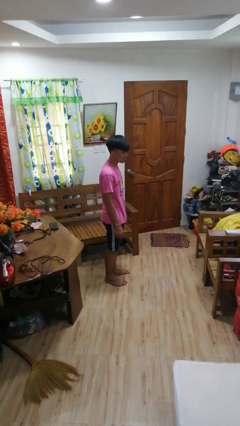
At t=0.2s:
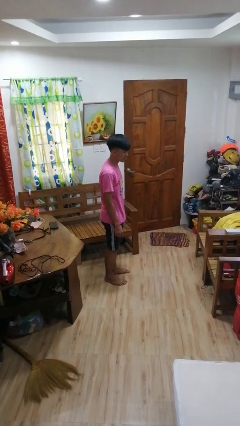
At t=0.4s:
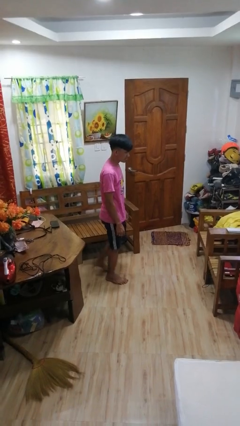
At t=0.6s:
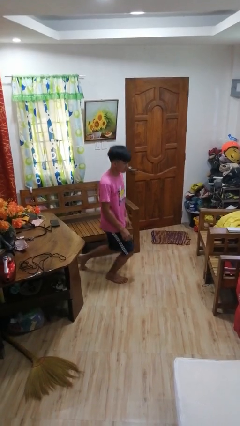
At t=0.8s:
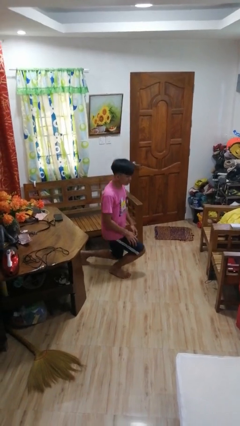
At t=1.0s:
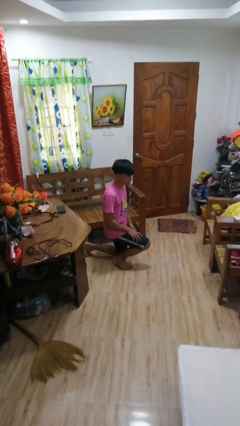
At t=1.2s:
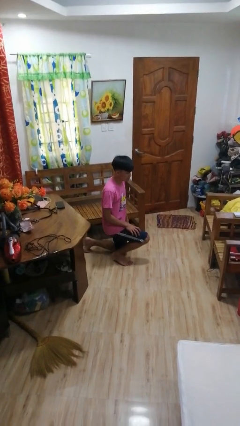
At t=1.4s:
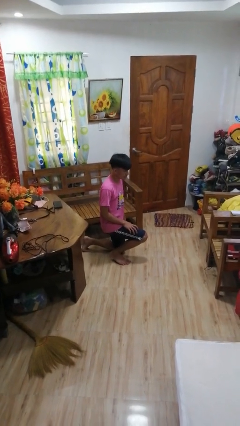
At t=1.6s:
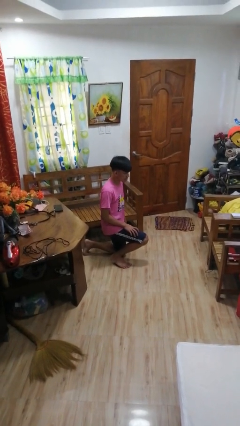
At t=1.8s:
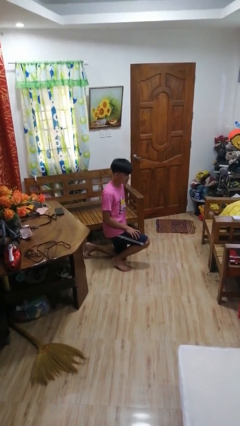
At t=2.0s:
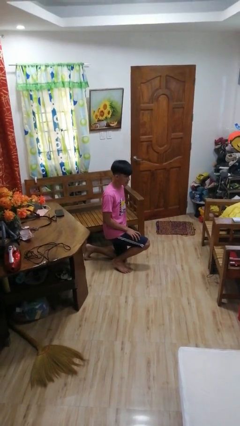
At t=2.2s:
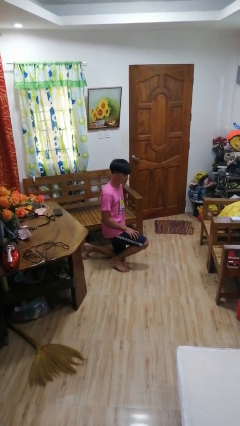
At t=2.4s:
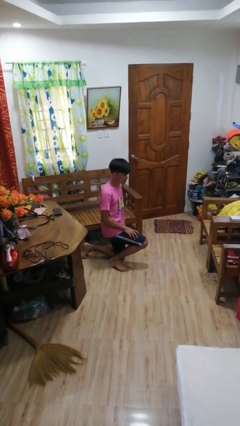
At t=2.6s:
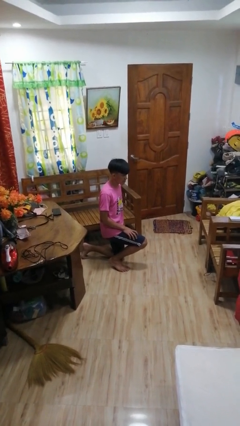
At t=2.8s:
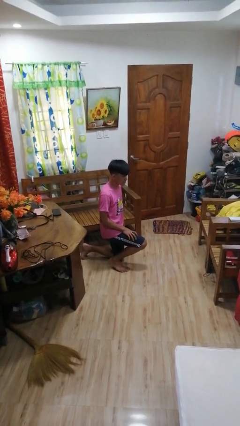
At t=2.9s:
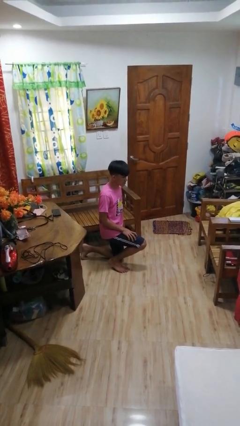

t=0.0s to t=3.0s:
person kneels

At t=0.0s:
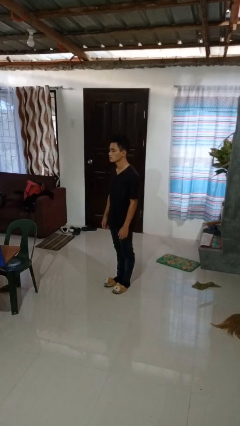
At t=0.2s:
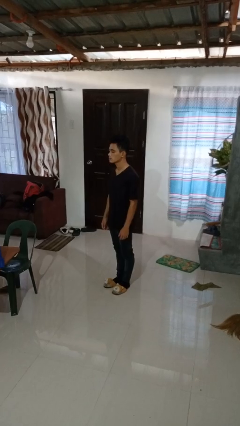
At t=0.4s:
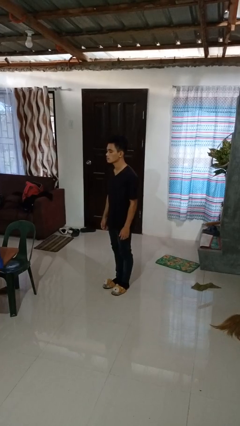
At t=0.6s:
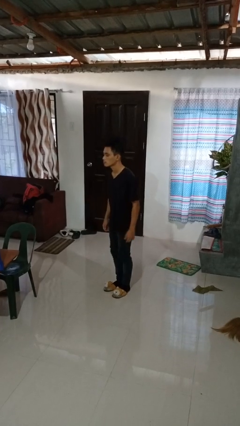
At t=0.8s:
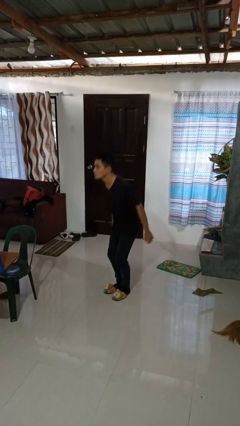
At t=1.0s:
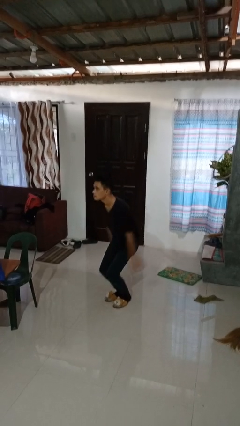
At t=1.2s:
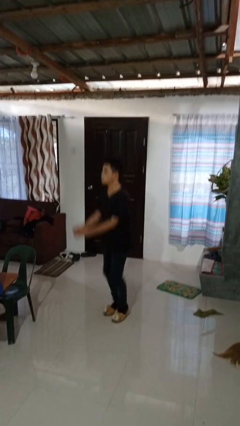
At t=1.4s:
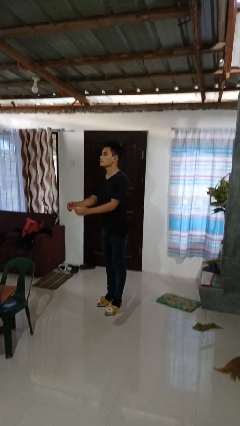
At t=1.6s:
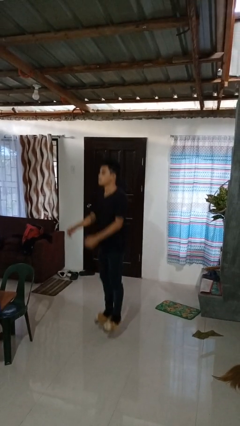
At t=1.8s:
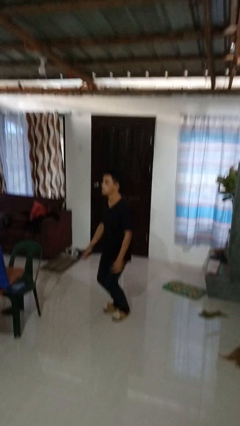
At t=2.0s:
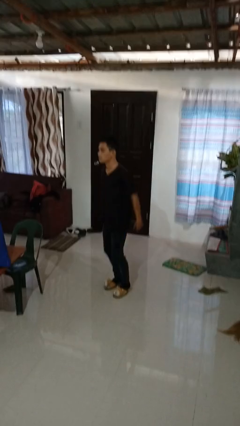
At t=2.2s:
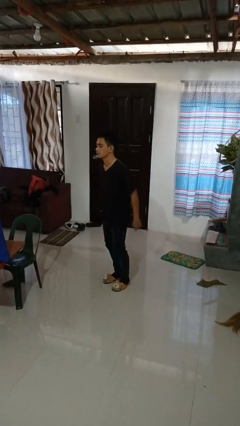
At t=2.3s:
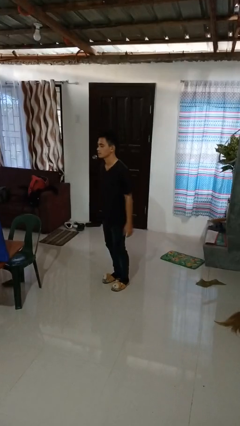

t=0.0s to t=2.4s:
person jumps

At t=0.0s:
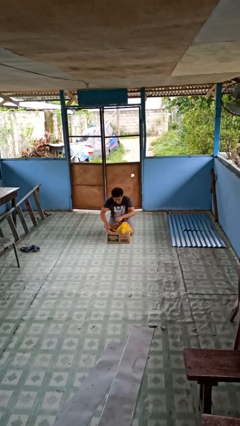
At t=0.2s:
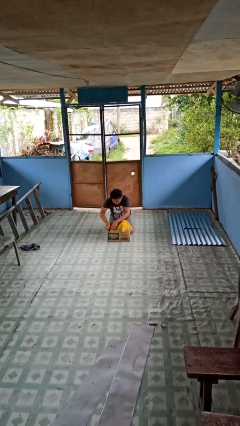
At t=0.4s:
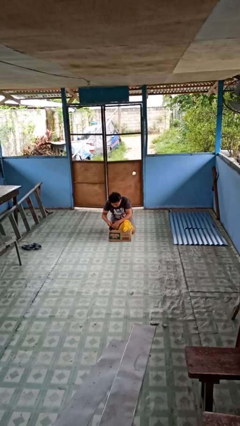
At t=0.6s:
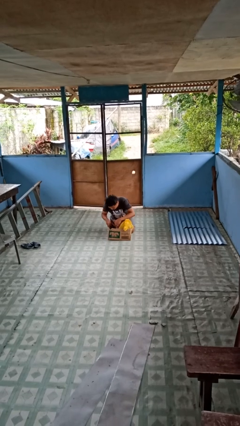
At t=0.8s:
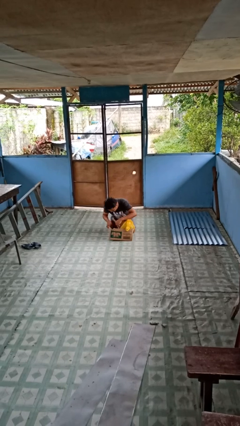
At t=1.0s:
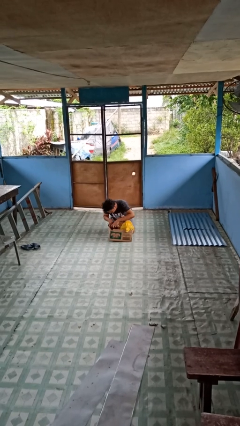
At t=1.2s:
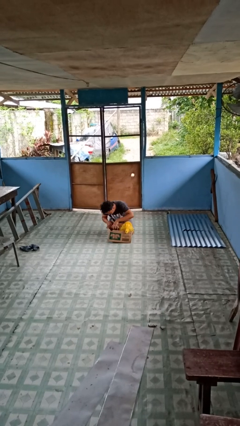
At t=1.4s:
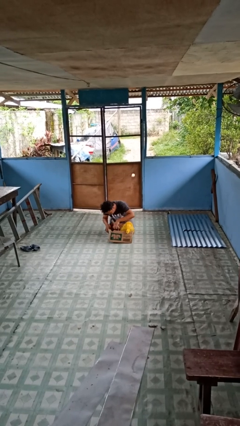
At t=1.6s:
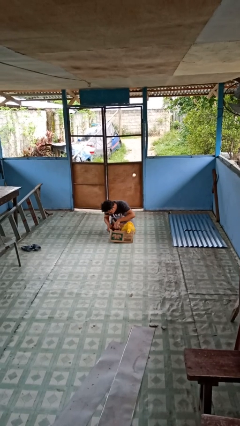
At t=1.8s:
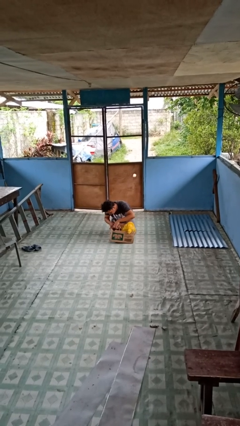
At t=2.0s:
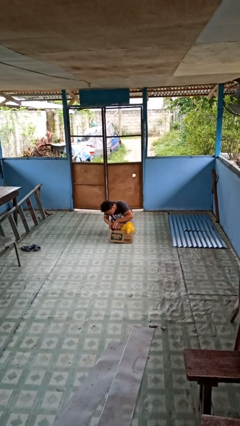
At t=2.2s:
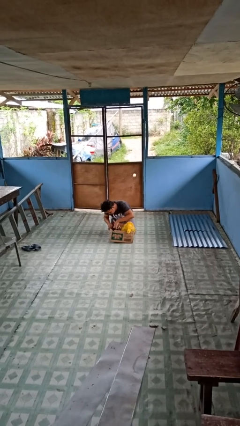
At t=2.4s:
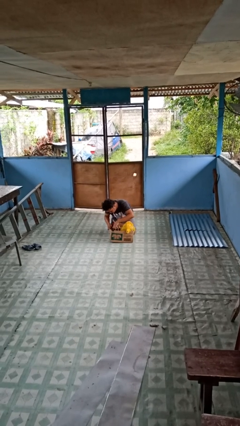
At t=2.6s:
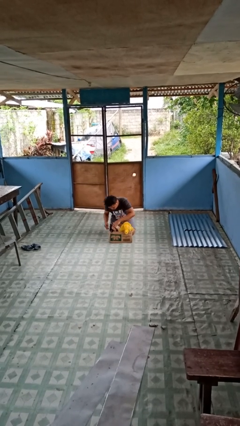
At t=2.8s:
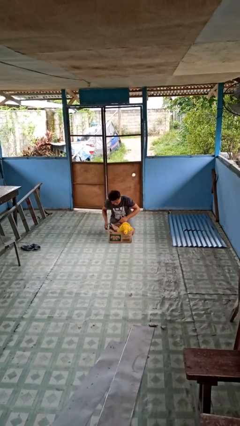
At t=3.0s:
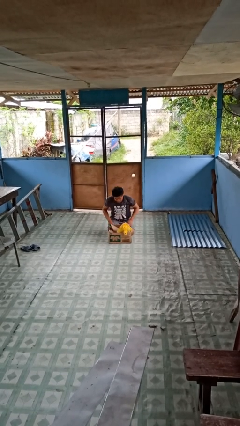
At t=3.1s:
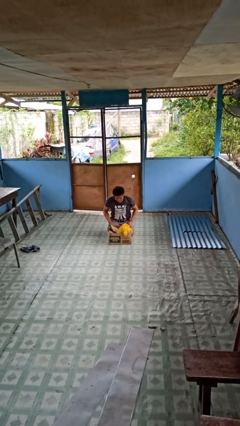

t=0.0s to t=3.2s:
person searches in box

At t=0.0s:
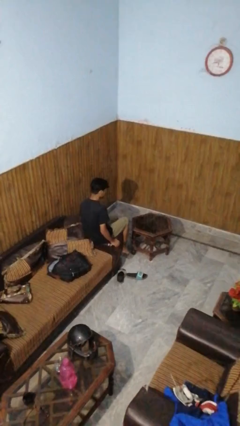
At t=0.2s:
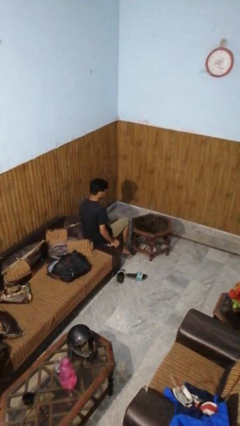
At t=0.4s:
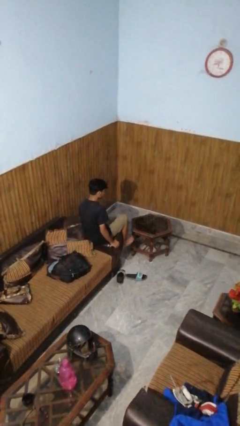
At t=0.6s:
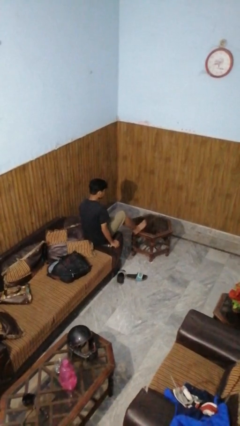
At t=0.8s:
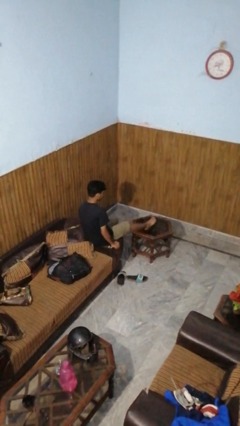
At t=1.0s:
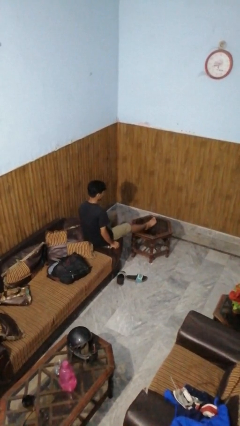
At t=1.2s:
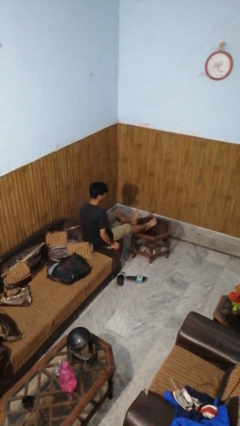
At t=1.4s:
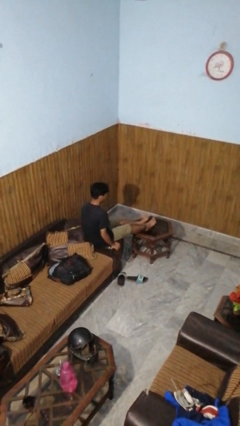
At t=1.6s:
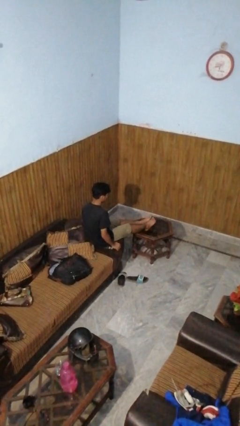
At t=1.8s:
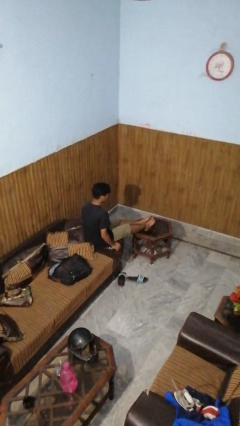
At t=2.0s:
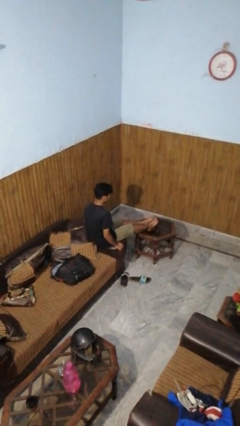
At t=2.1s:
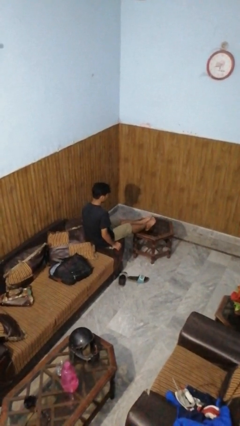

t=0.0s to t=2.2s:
person puts feet up

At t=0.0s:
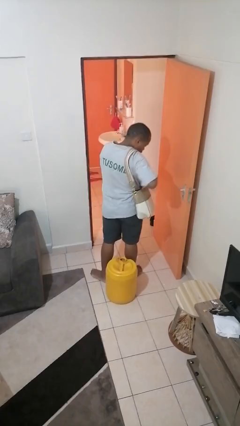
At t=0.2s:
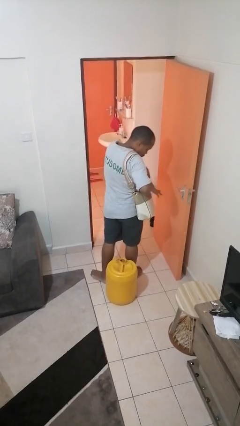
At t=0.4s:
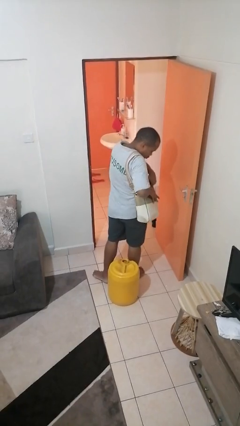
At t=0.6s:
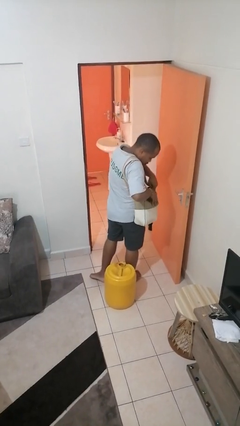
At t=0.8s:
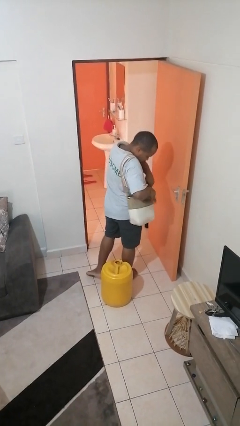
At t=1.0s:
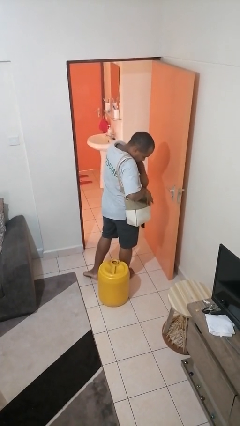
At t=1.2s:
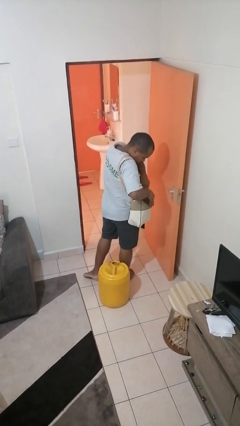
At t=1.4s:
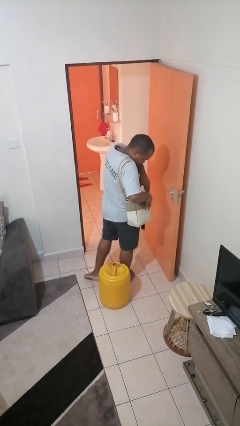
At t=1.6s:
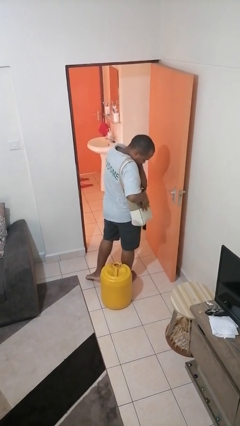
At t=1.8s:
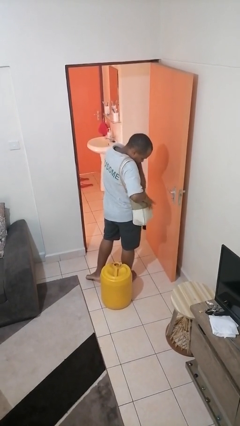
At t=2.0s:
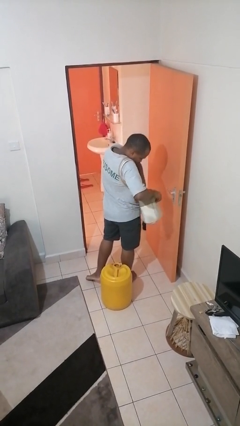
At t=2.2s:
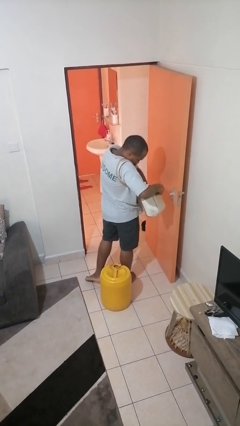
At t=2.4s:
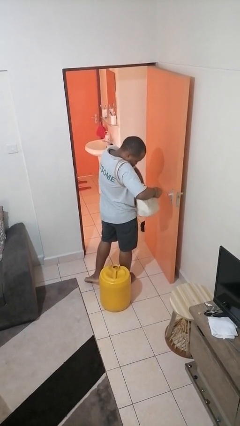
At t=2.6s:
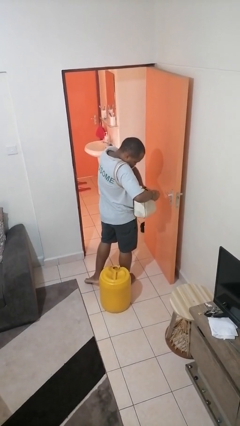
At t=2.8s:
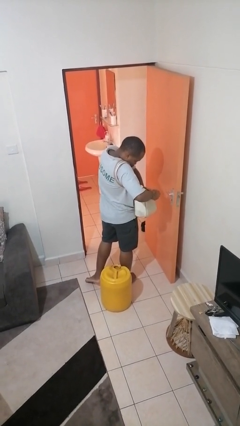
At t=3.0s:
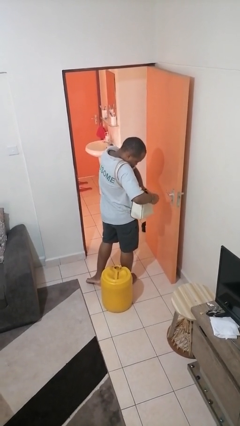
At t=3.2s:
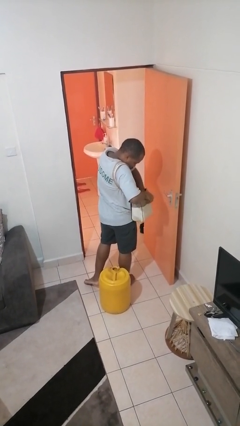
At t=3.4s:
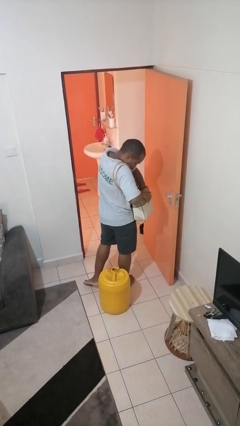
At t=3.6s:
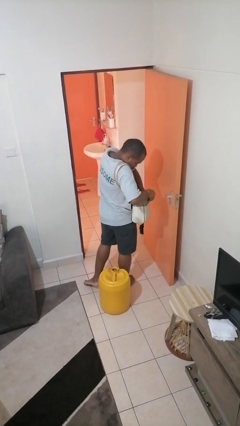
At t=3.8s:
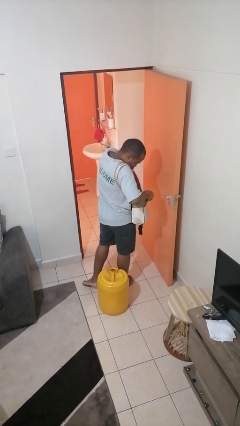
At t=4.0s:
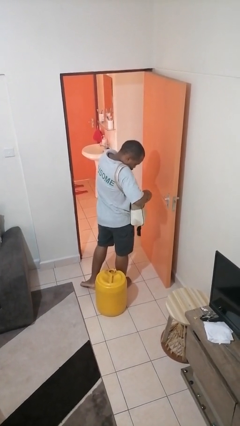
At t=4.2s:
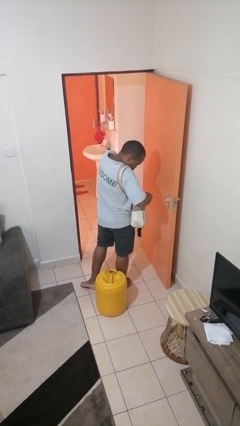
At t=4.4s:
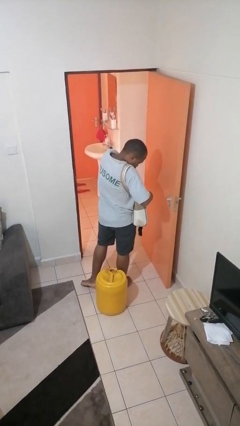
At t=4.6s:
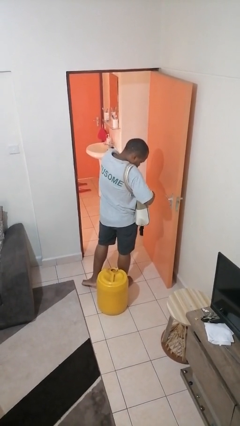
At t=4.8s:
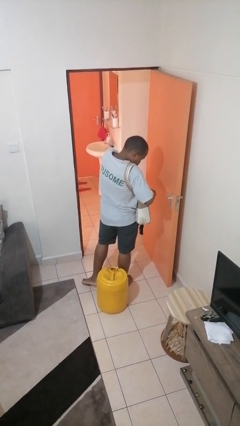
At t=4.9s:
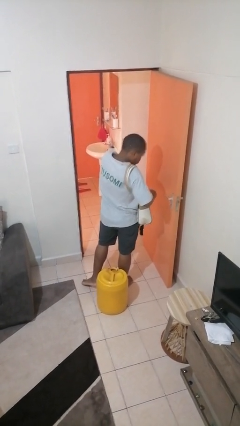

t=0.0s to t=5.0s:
person searches in purse

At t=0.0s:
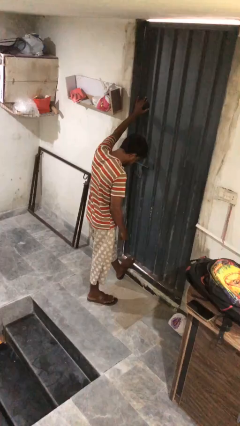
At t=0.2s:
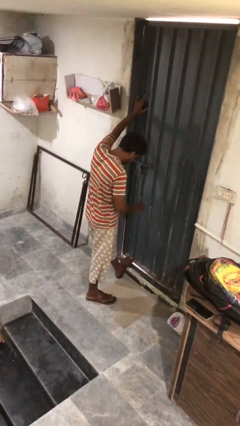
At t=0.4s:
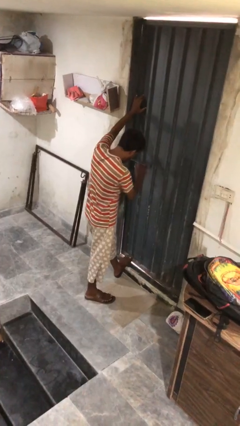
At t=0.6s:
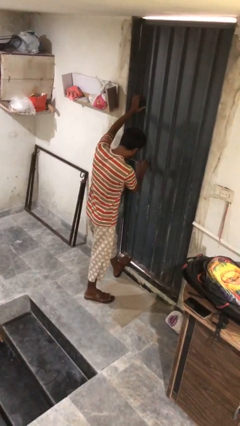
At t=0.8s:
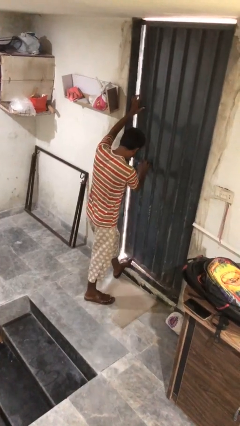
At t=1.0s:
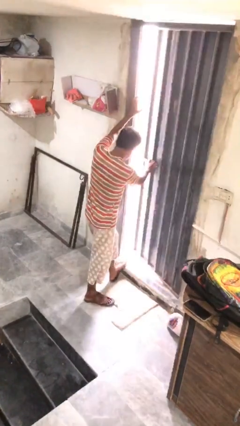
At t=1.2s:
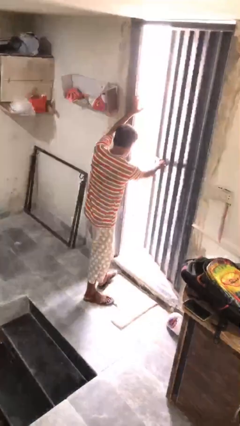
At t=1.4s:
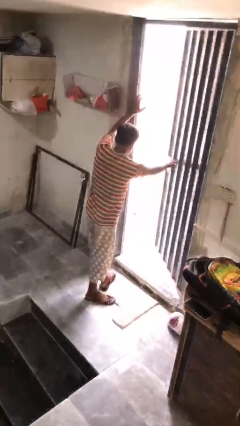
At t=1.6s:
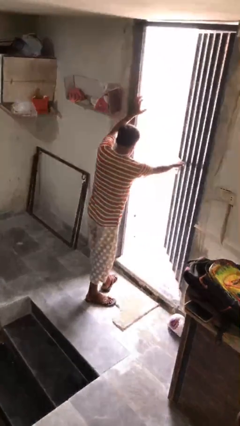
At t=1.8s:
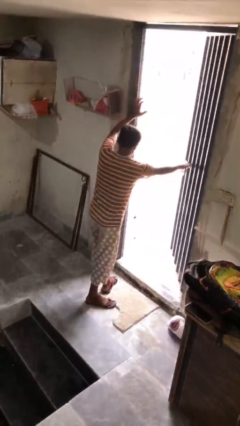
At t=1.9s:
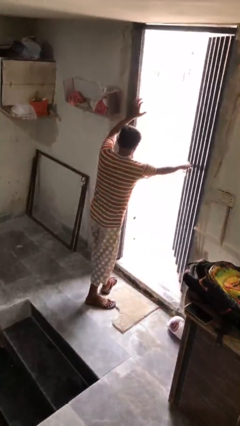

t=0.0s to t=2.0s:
person opens facility door
